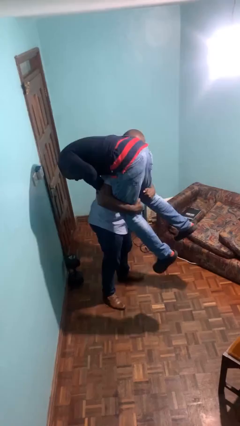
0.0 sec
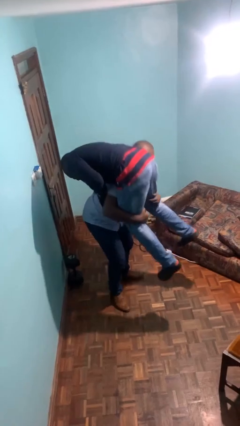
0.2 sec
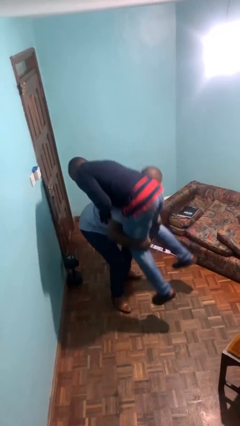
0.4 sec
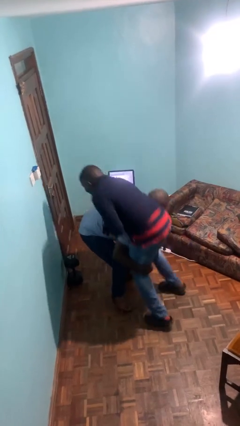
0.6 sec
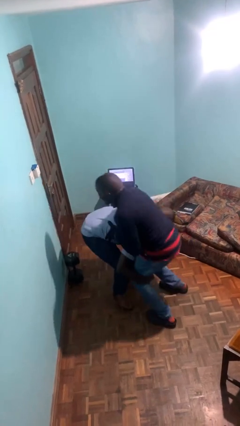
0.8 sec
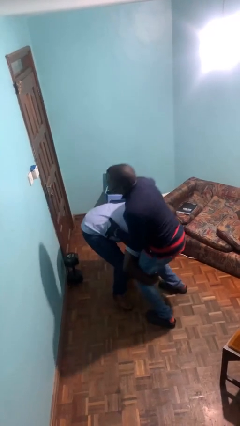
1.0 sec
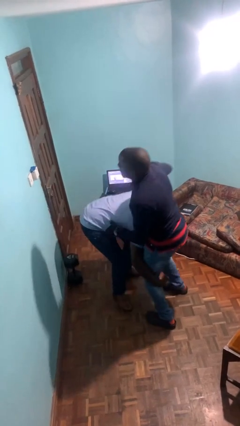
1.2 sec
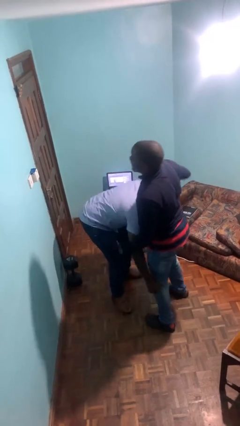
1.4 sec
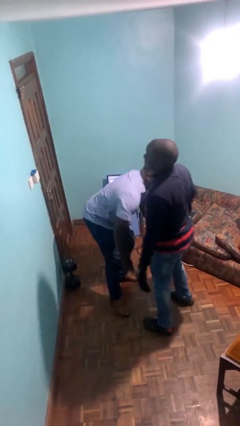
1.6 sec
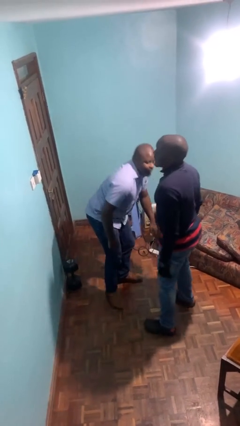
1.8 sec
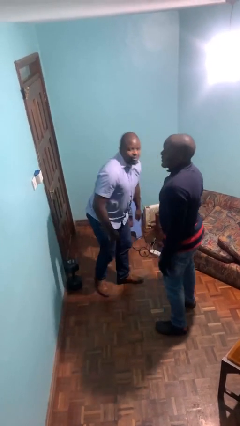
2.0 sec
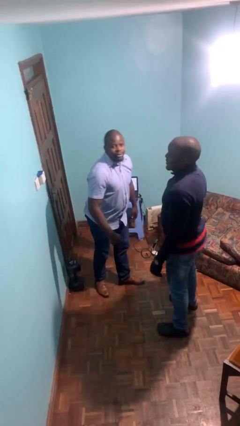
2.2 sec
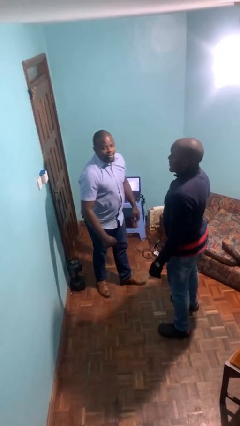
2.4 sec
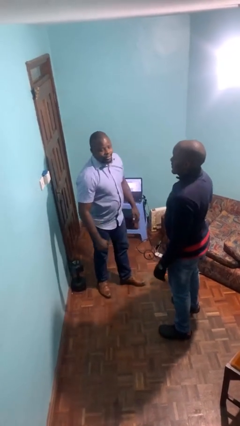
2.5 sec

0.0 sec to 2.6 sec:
person puts down person

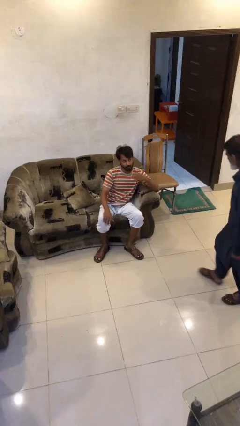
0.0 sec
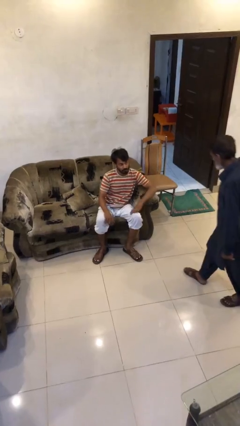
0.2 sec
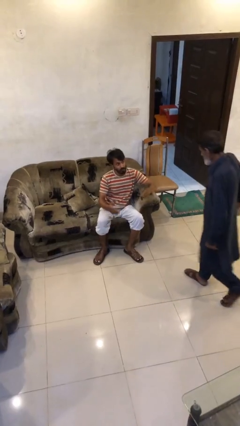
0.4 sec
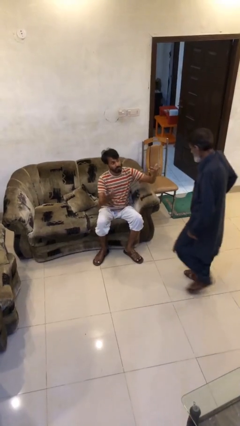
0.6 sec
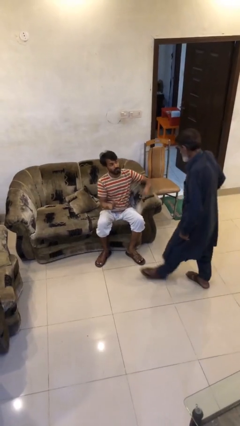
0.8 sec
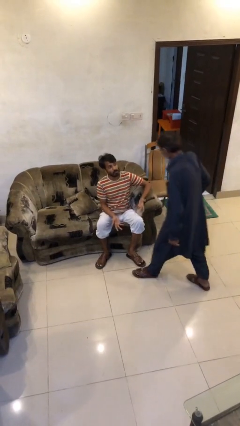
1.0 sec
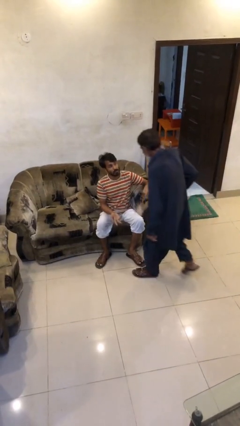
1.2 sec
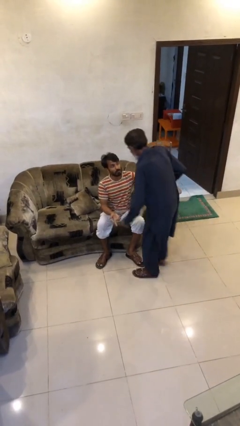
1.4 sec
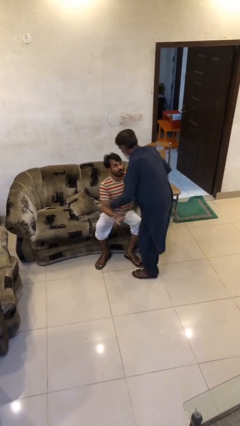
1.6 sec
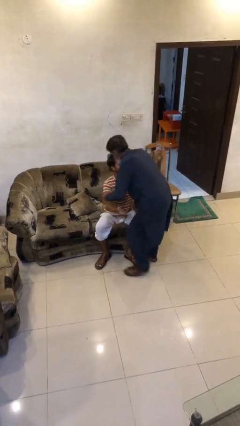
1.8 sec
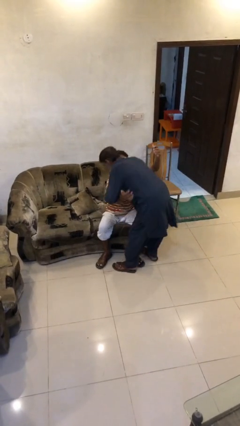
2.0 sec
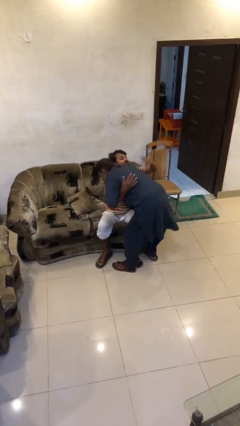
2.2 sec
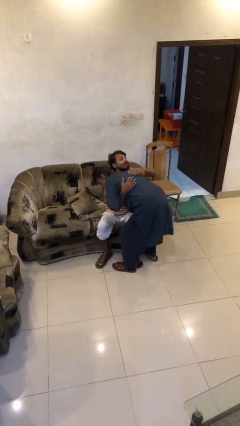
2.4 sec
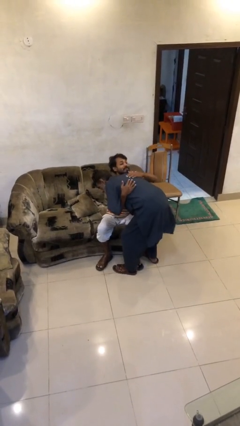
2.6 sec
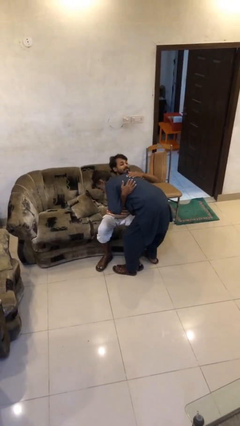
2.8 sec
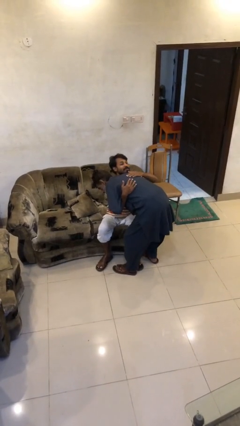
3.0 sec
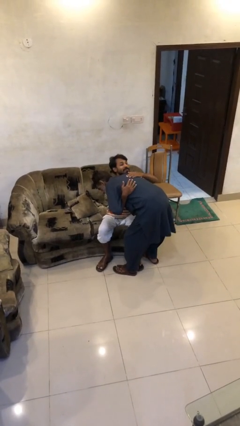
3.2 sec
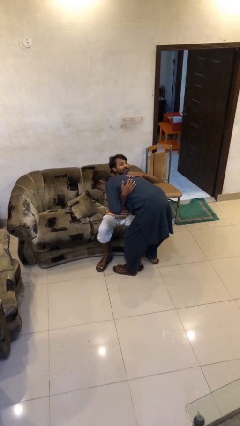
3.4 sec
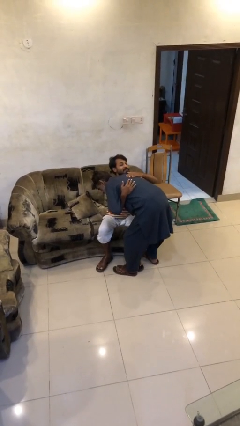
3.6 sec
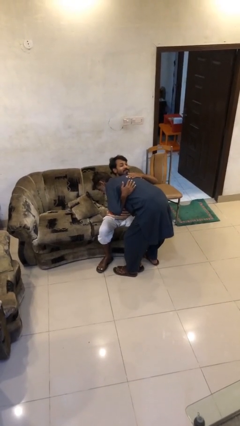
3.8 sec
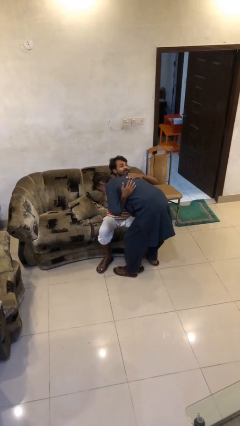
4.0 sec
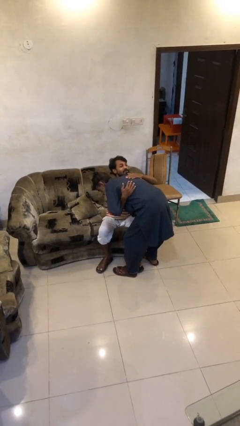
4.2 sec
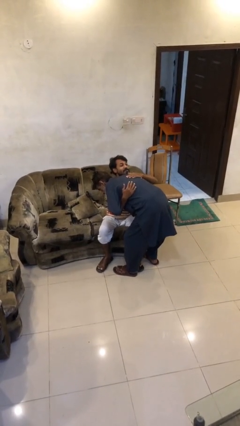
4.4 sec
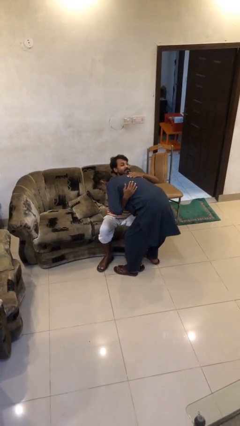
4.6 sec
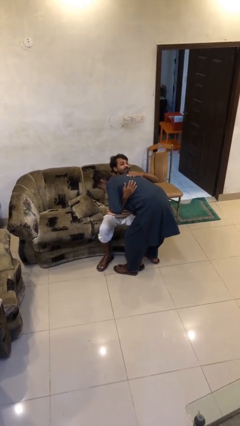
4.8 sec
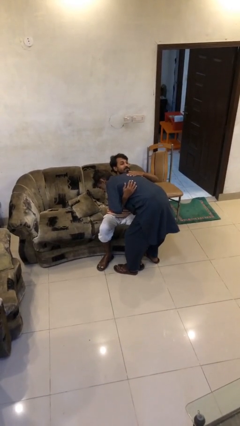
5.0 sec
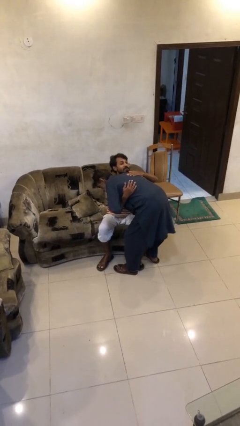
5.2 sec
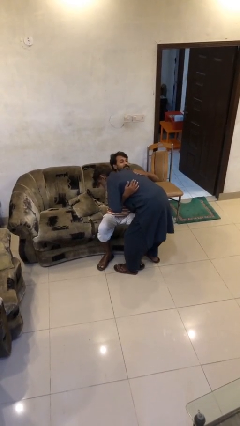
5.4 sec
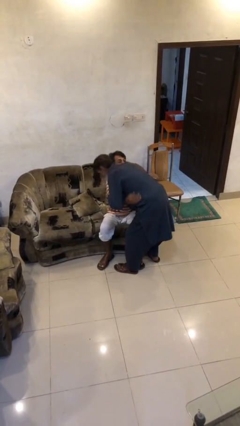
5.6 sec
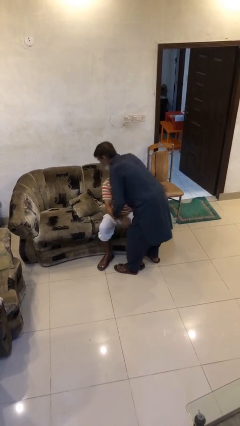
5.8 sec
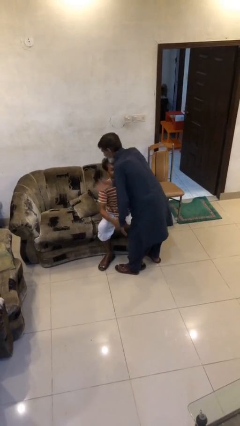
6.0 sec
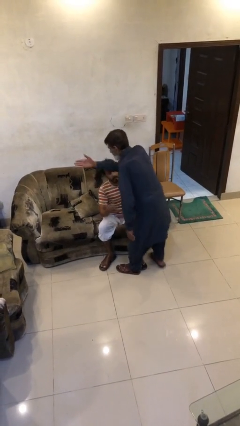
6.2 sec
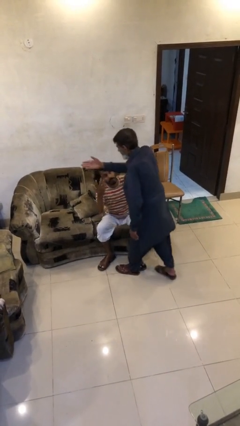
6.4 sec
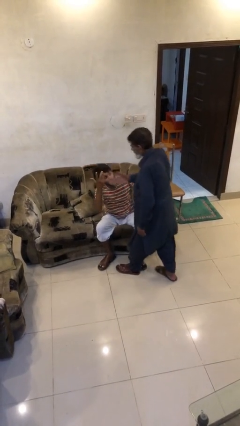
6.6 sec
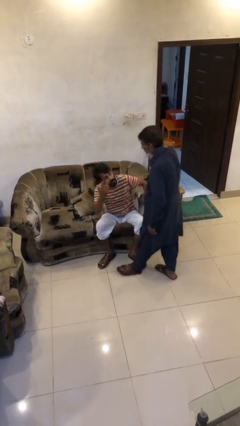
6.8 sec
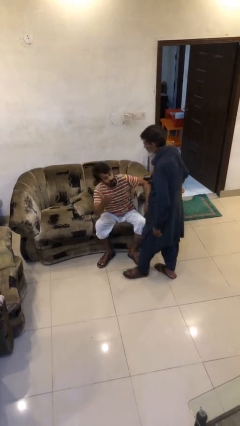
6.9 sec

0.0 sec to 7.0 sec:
person embraces person

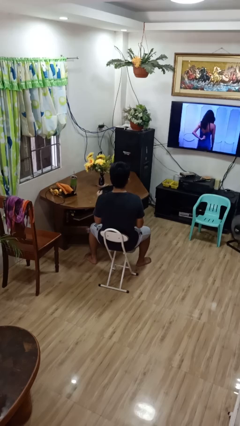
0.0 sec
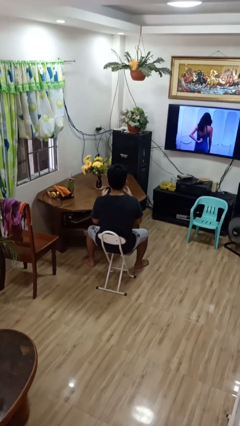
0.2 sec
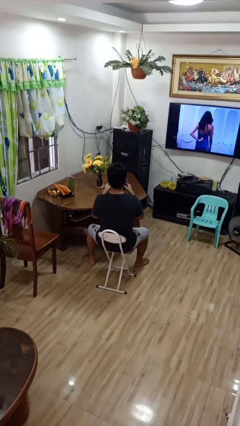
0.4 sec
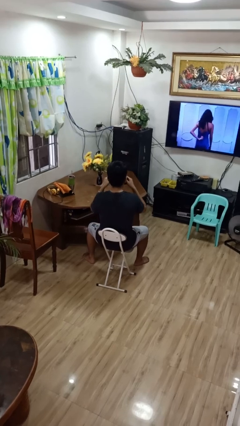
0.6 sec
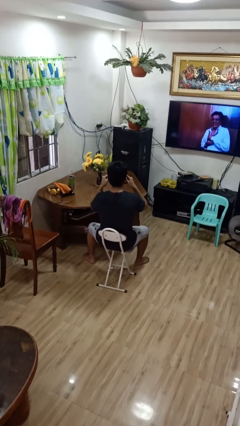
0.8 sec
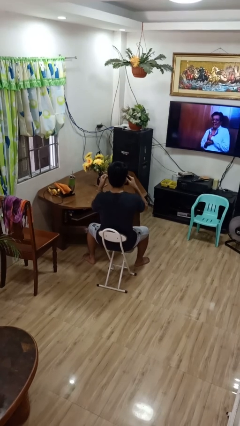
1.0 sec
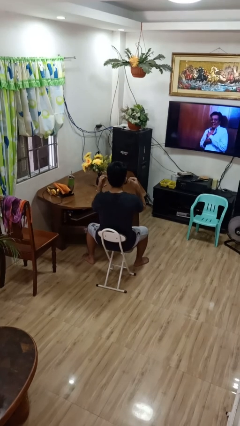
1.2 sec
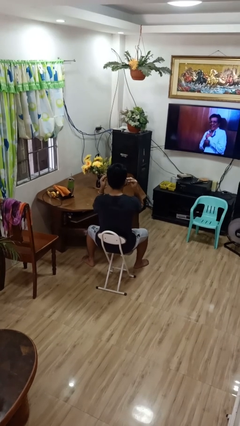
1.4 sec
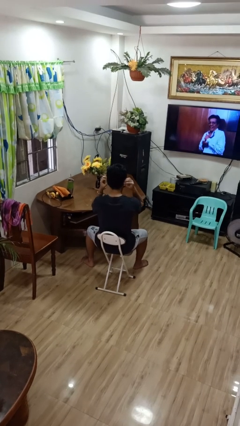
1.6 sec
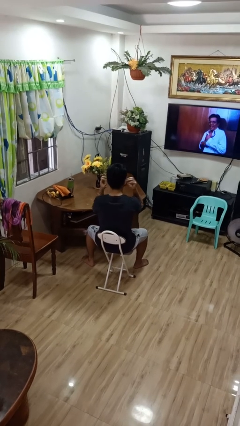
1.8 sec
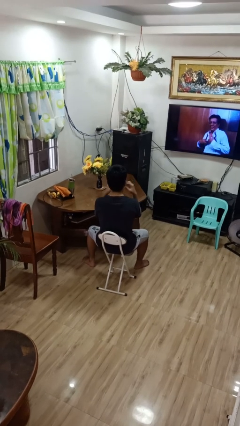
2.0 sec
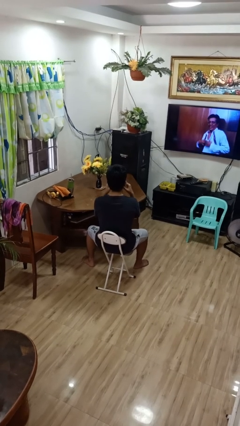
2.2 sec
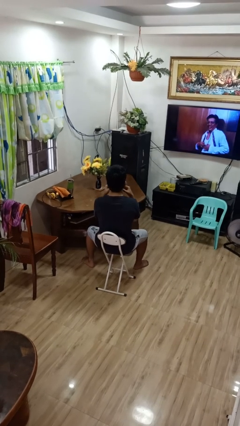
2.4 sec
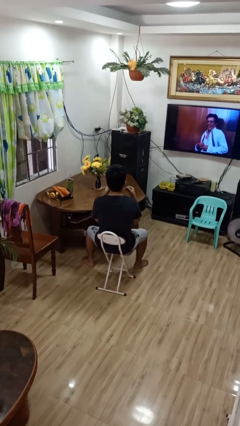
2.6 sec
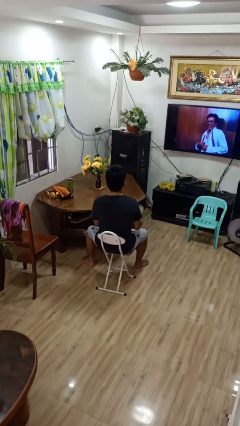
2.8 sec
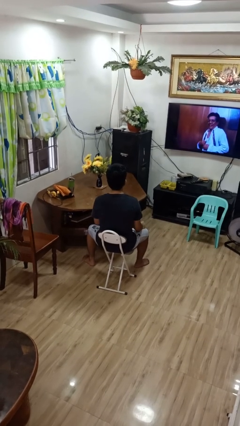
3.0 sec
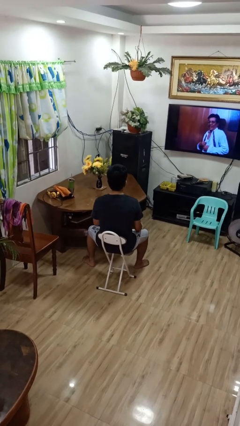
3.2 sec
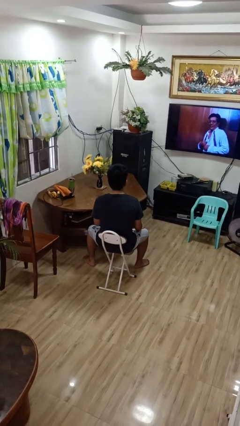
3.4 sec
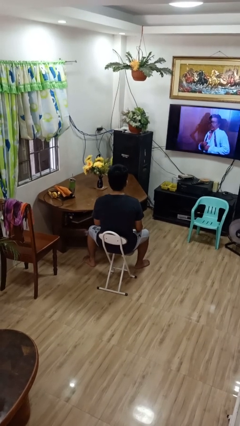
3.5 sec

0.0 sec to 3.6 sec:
person puts on facemask

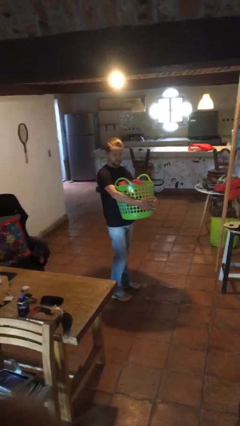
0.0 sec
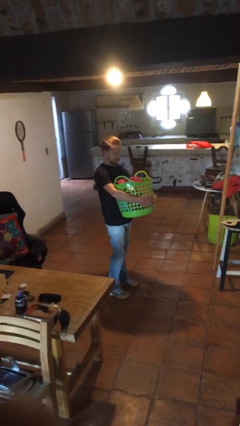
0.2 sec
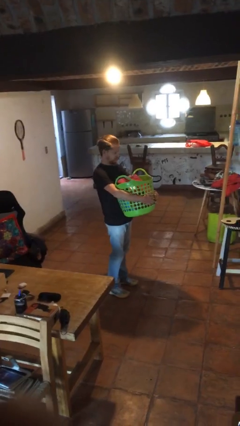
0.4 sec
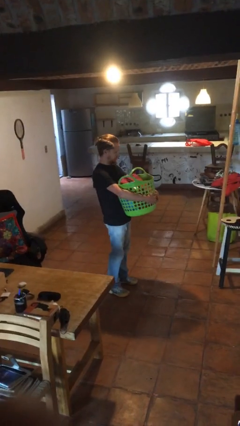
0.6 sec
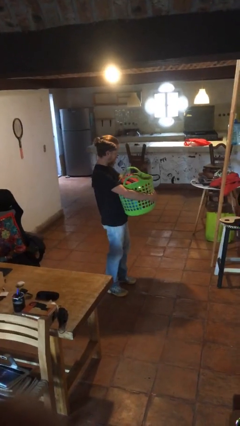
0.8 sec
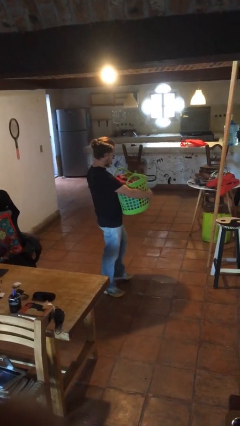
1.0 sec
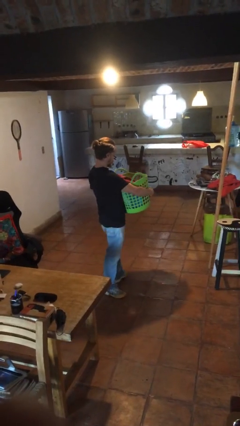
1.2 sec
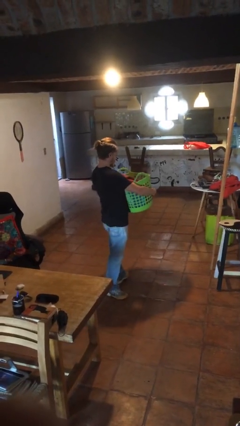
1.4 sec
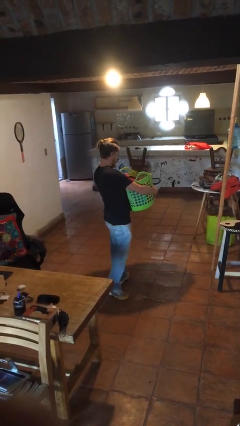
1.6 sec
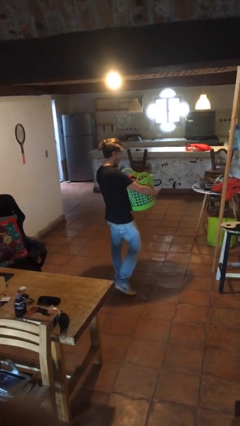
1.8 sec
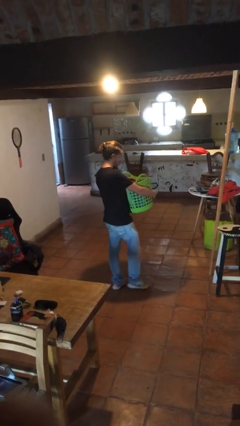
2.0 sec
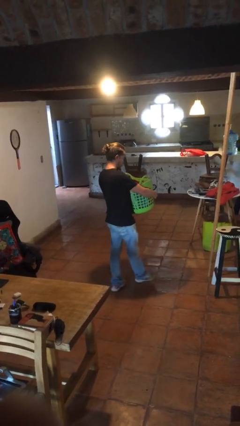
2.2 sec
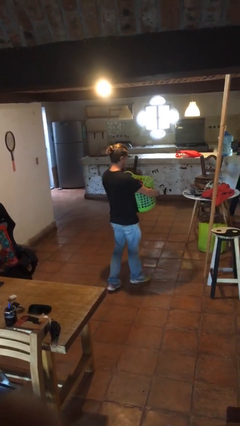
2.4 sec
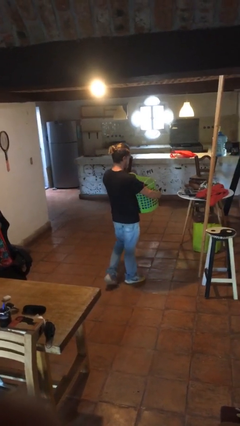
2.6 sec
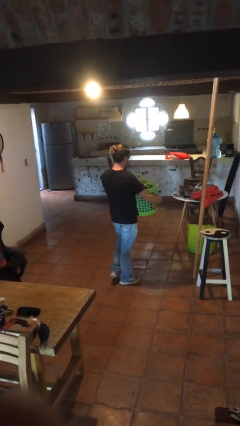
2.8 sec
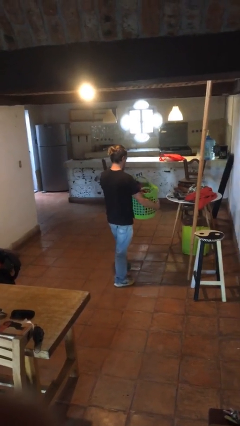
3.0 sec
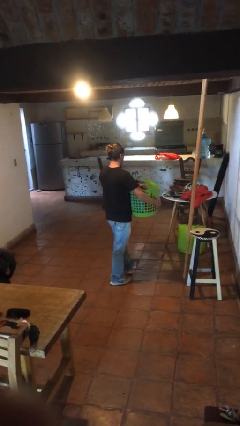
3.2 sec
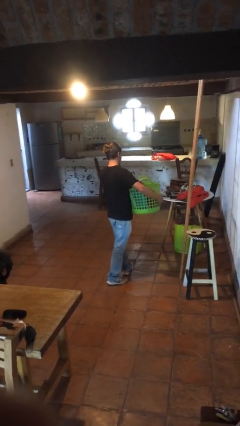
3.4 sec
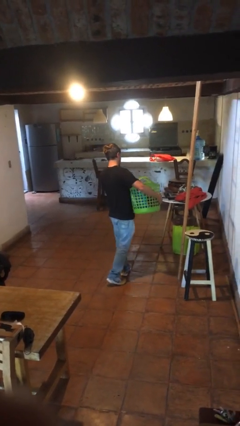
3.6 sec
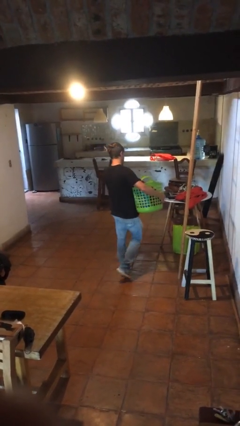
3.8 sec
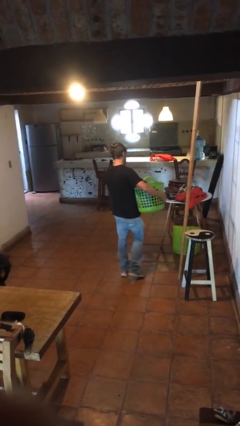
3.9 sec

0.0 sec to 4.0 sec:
person carries laundry basket

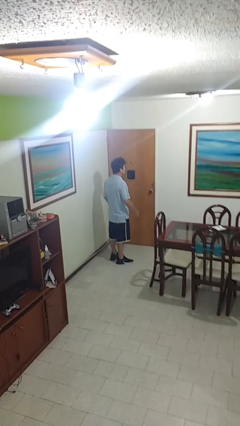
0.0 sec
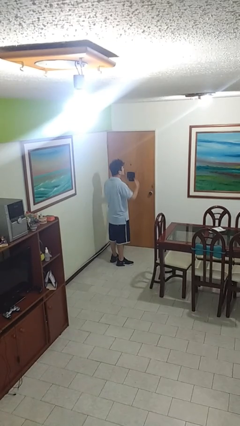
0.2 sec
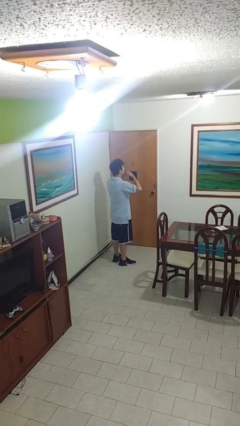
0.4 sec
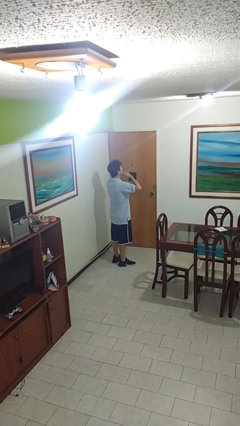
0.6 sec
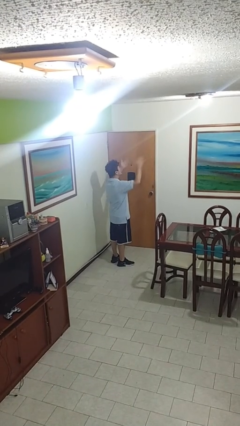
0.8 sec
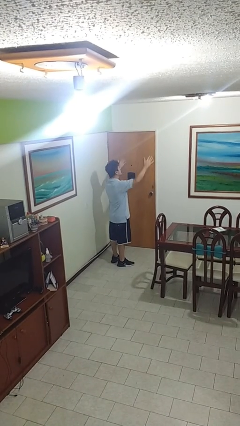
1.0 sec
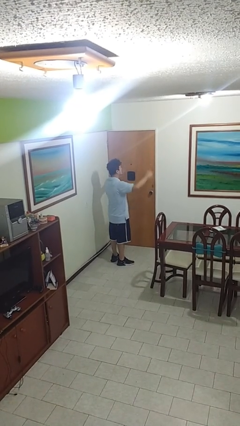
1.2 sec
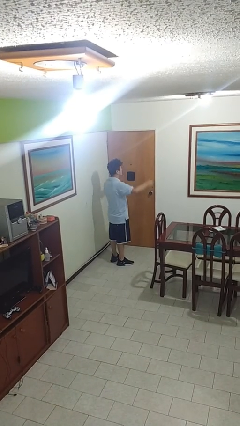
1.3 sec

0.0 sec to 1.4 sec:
person gestures blow kiss
